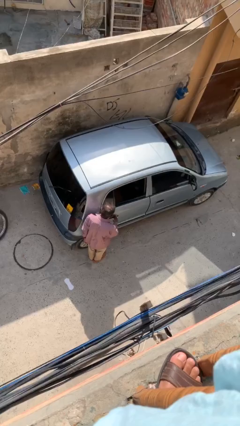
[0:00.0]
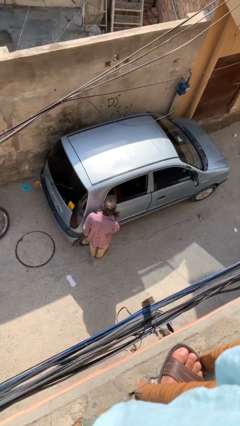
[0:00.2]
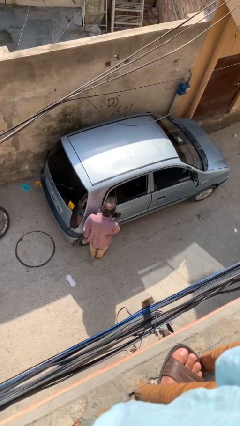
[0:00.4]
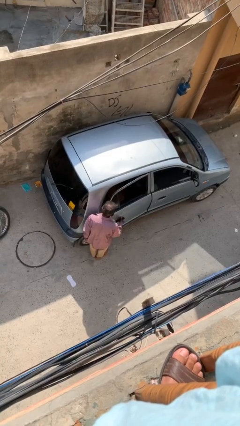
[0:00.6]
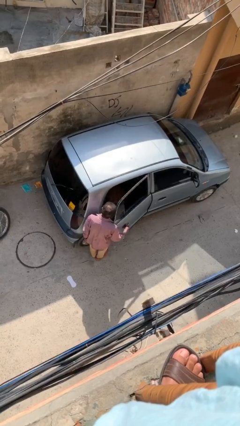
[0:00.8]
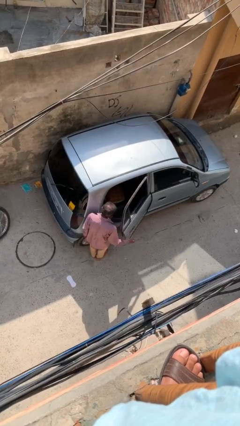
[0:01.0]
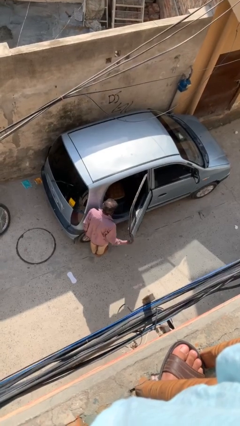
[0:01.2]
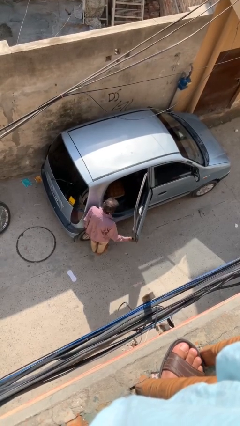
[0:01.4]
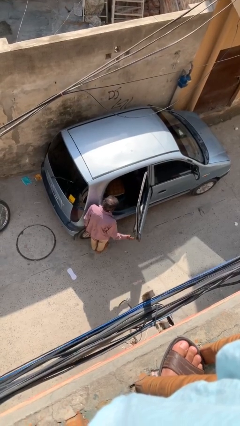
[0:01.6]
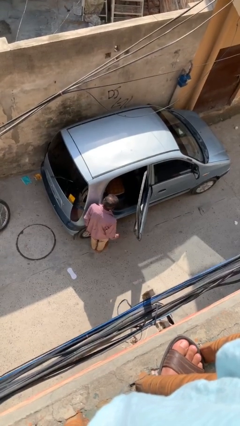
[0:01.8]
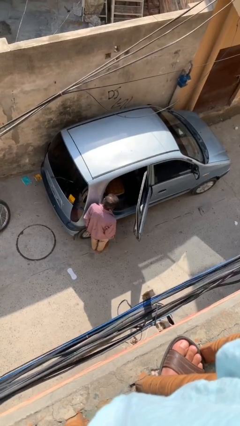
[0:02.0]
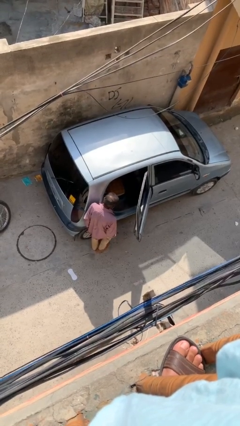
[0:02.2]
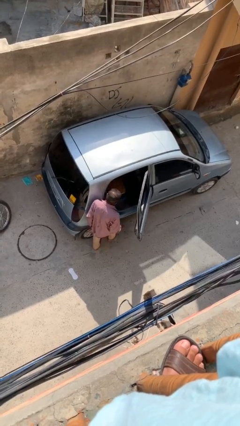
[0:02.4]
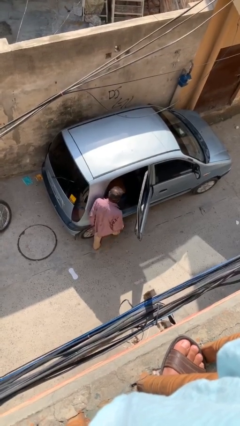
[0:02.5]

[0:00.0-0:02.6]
person opens car door

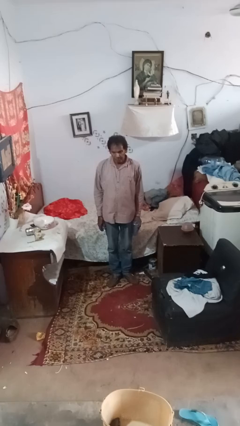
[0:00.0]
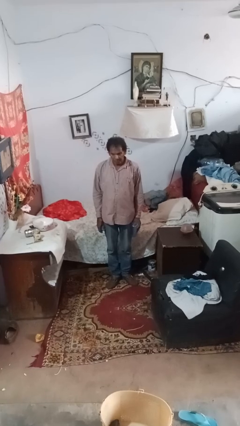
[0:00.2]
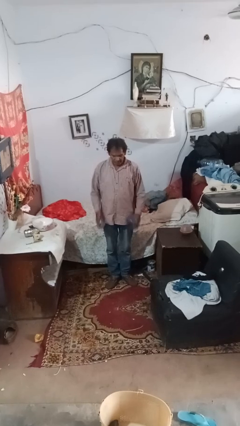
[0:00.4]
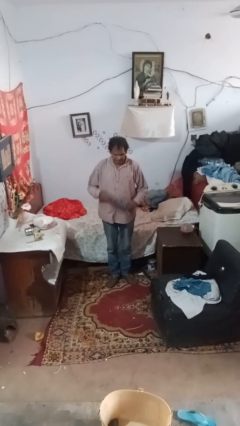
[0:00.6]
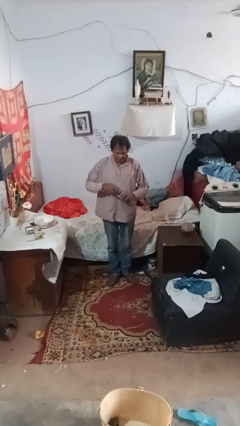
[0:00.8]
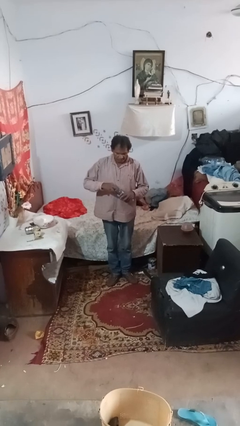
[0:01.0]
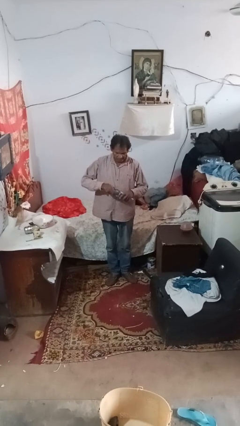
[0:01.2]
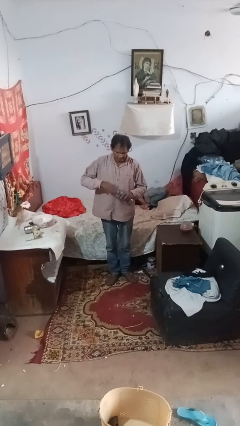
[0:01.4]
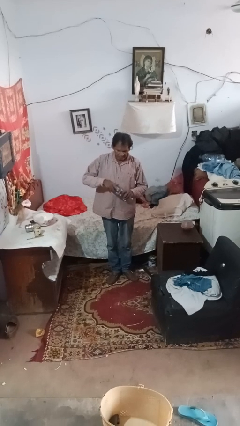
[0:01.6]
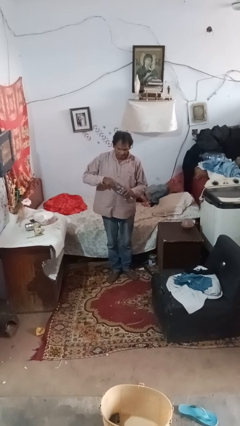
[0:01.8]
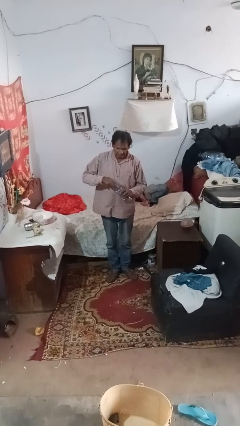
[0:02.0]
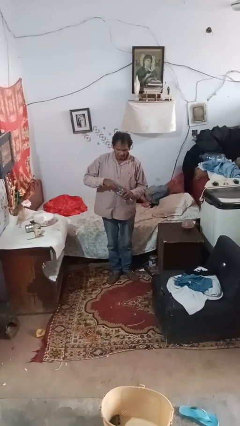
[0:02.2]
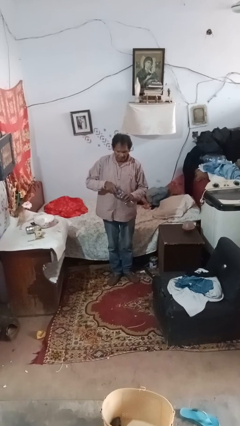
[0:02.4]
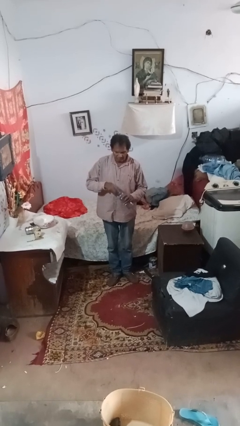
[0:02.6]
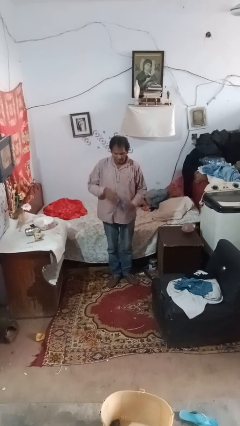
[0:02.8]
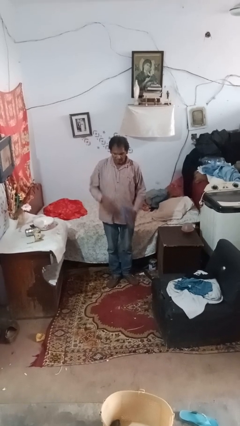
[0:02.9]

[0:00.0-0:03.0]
person screws lid to bottle

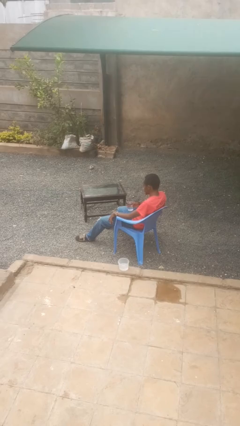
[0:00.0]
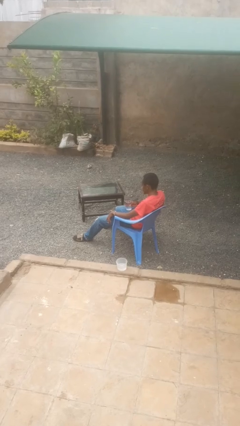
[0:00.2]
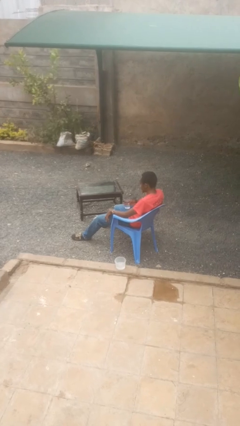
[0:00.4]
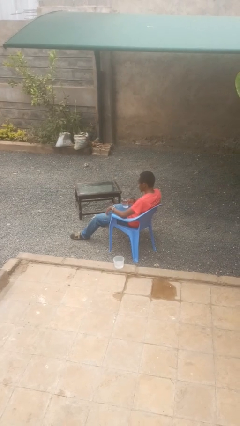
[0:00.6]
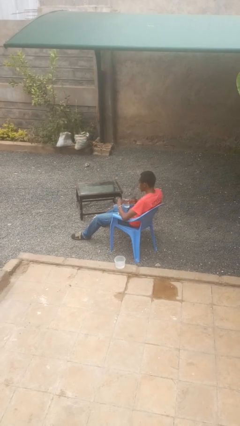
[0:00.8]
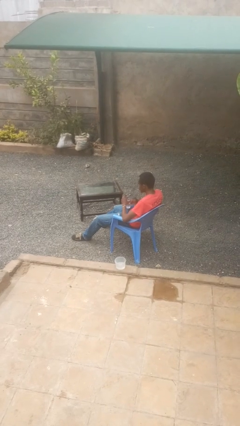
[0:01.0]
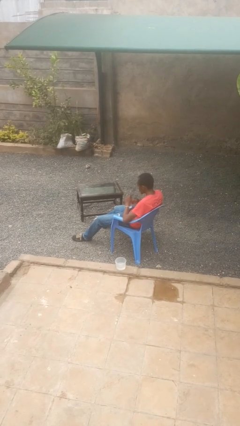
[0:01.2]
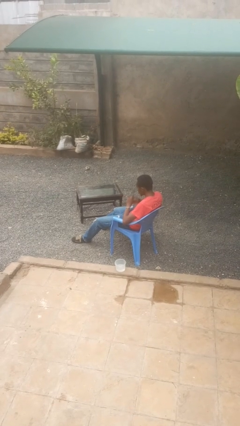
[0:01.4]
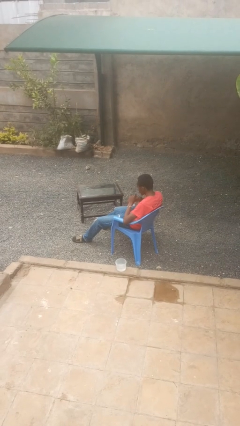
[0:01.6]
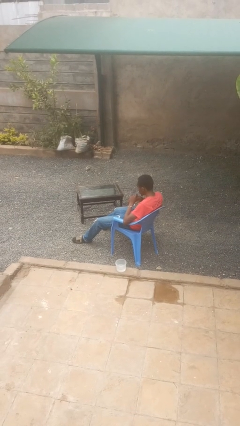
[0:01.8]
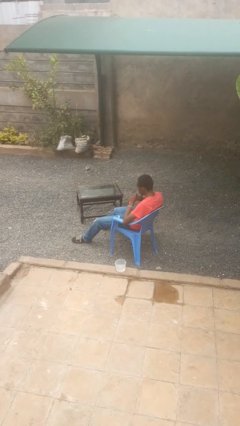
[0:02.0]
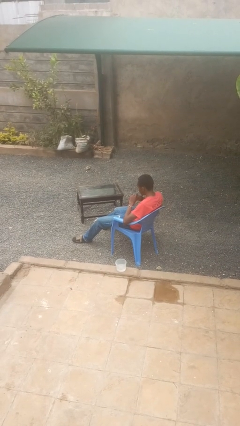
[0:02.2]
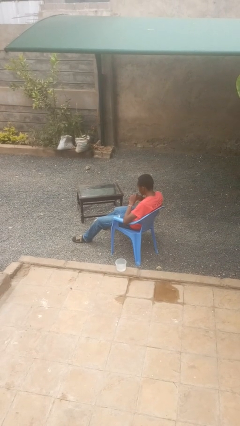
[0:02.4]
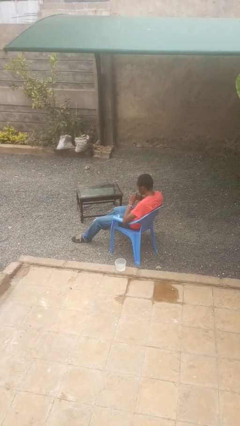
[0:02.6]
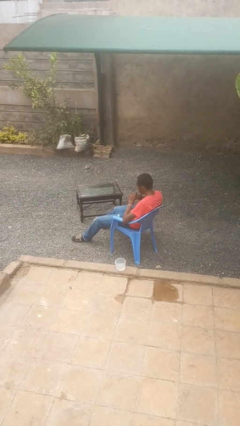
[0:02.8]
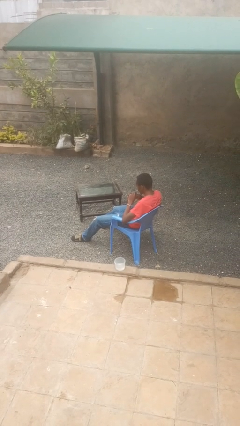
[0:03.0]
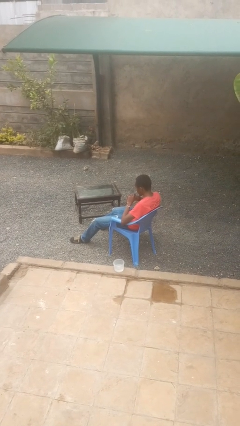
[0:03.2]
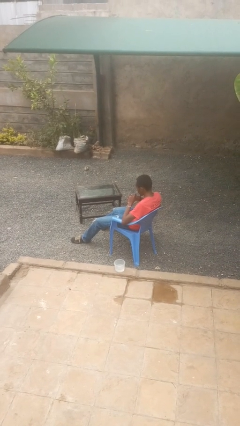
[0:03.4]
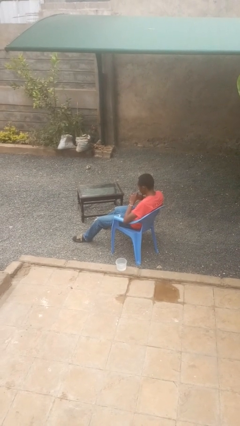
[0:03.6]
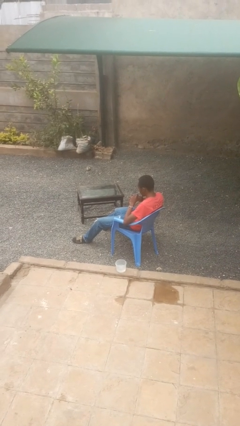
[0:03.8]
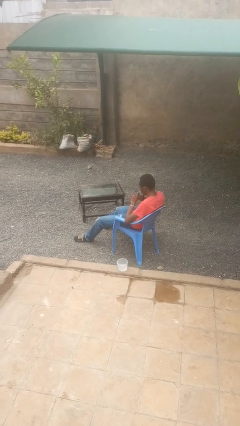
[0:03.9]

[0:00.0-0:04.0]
person drinks from straw

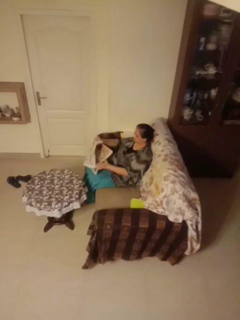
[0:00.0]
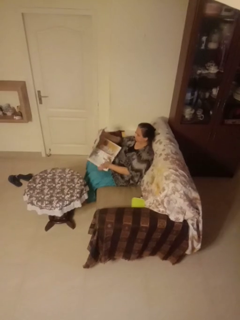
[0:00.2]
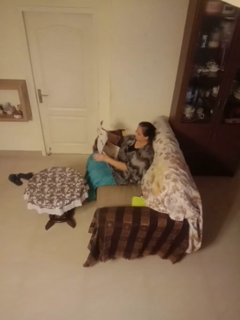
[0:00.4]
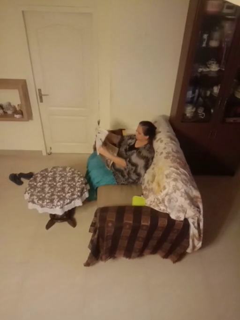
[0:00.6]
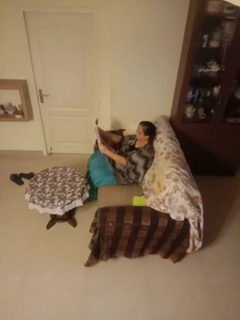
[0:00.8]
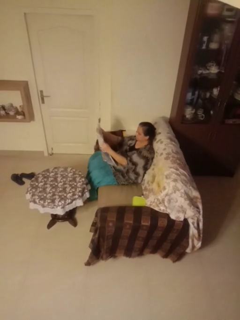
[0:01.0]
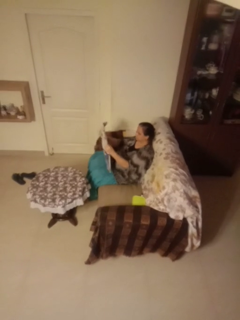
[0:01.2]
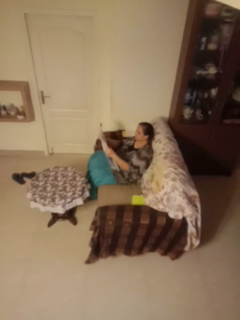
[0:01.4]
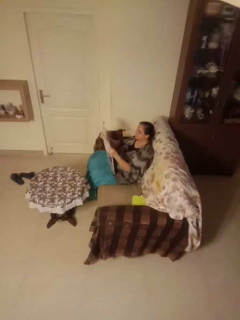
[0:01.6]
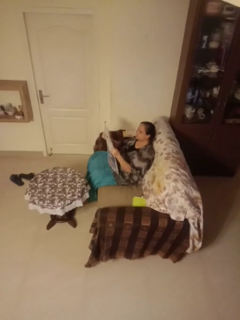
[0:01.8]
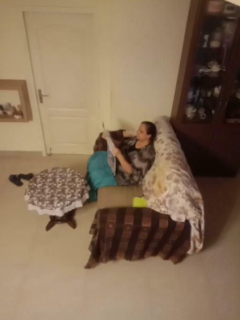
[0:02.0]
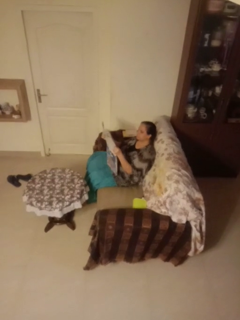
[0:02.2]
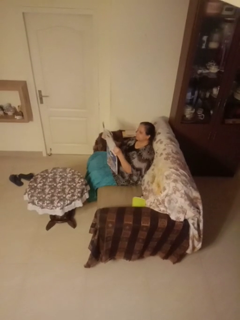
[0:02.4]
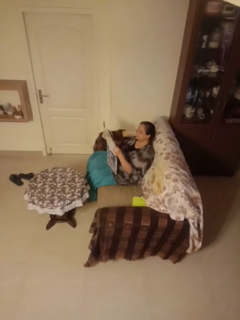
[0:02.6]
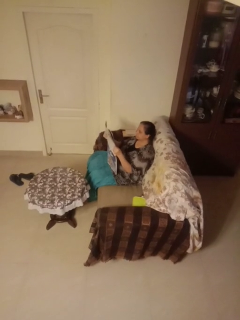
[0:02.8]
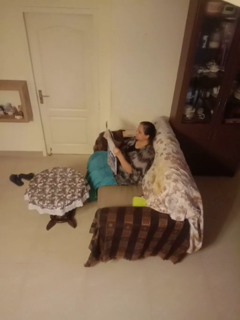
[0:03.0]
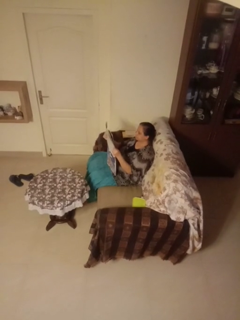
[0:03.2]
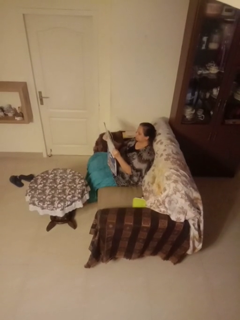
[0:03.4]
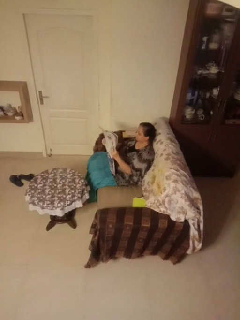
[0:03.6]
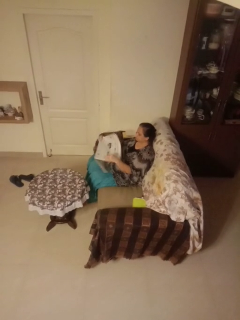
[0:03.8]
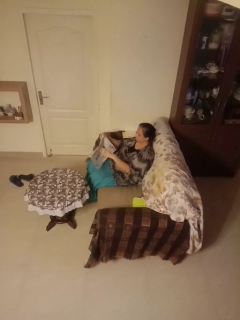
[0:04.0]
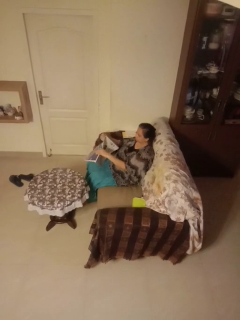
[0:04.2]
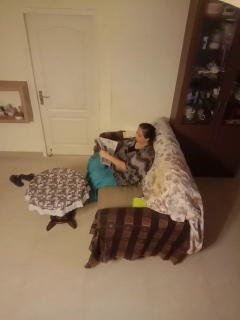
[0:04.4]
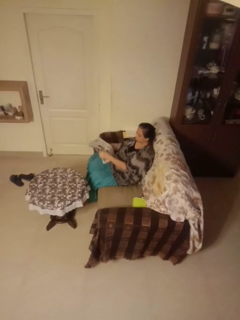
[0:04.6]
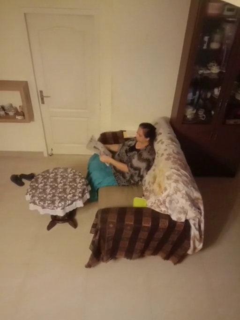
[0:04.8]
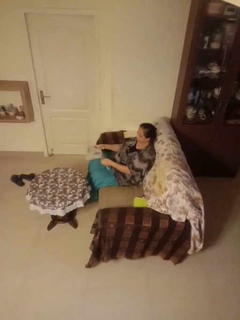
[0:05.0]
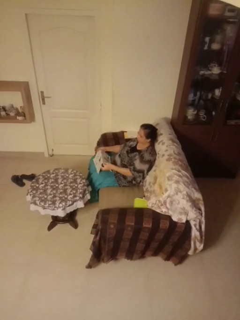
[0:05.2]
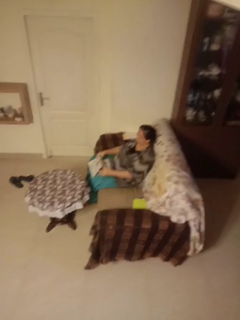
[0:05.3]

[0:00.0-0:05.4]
person reads newspaper

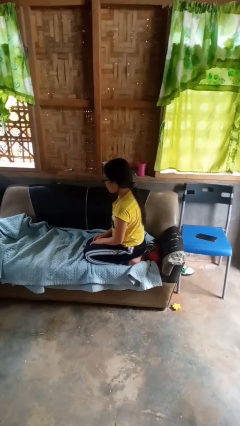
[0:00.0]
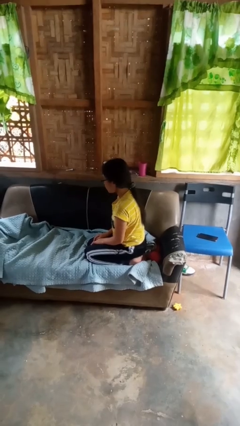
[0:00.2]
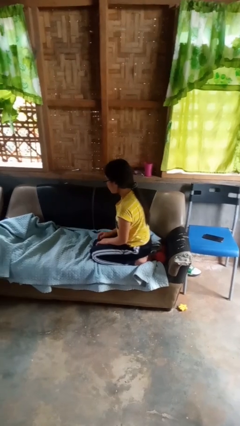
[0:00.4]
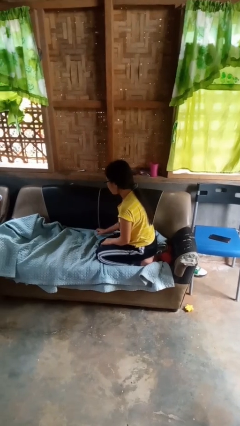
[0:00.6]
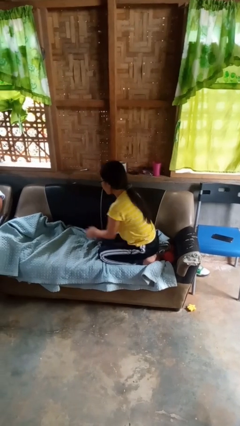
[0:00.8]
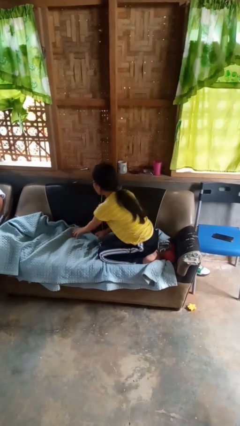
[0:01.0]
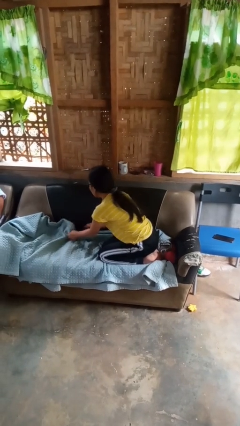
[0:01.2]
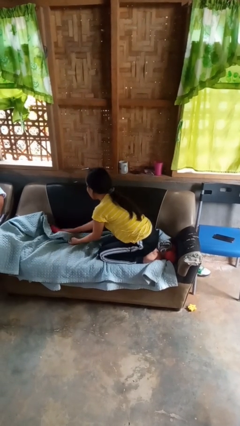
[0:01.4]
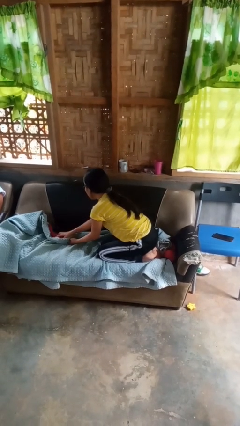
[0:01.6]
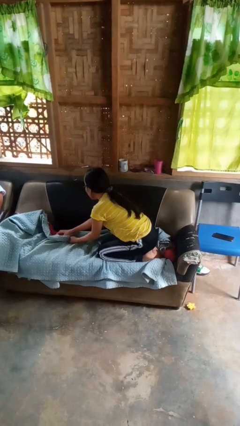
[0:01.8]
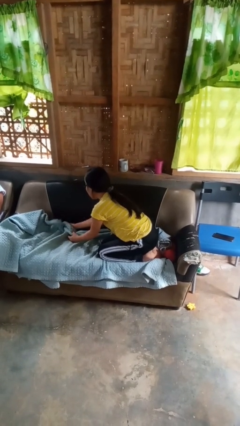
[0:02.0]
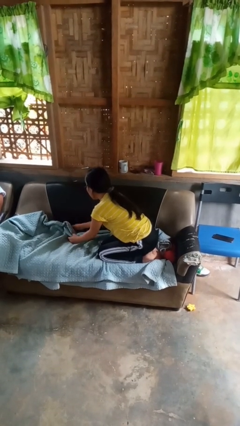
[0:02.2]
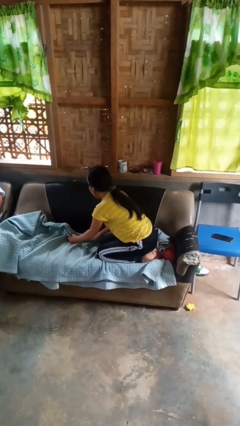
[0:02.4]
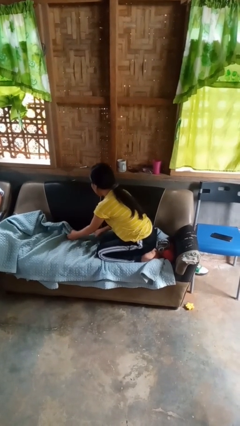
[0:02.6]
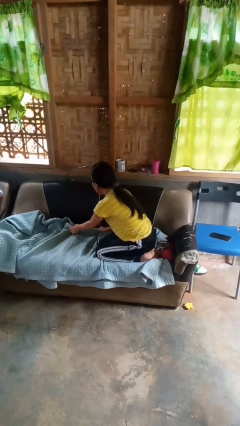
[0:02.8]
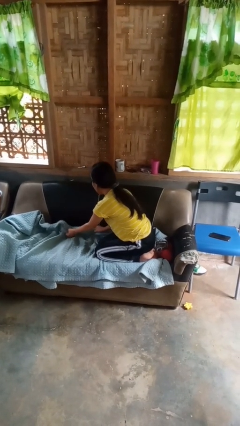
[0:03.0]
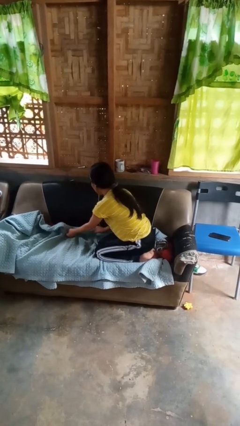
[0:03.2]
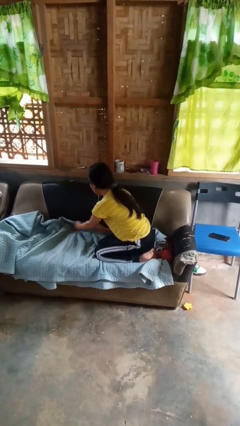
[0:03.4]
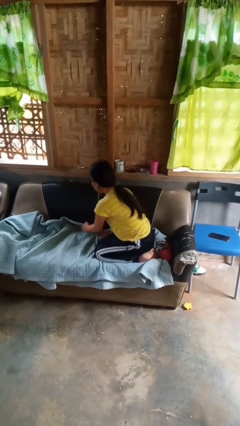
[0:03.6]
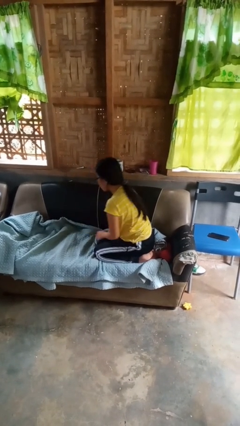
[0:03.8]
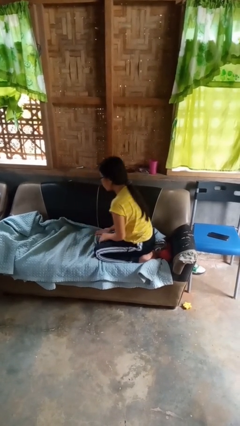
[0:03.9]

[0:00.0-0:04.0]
person searches in couch
